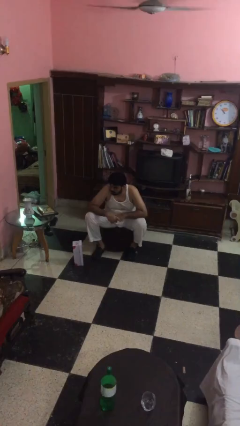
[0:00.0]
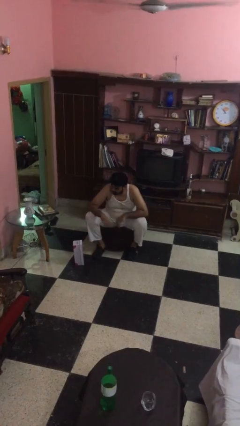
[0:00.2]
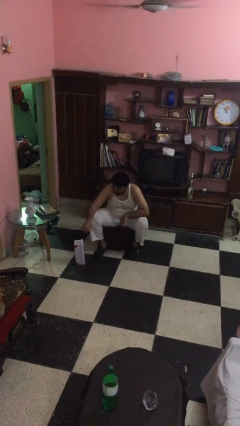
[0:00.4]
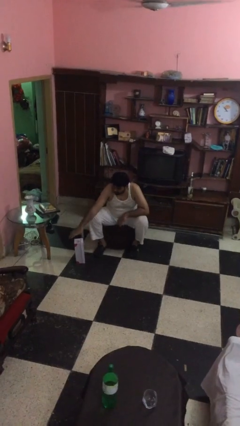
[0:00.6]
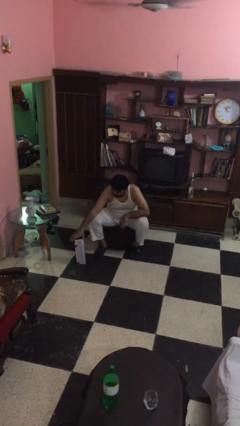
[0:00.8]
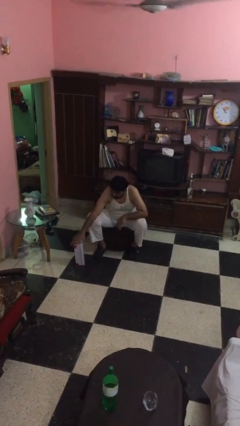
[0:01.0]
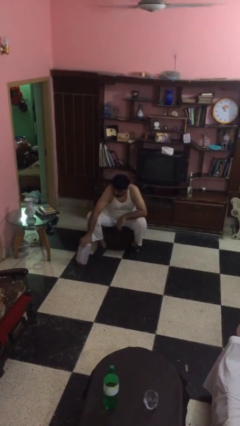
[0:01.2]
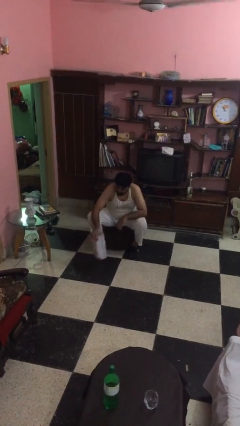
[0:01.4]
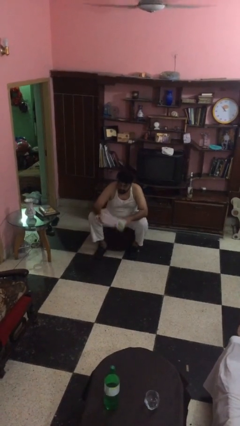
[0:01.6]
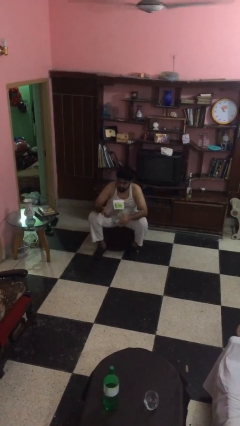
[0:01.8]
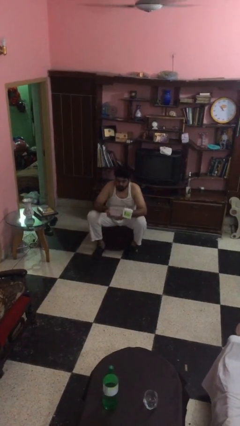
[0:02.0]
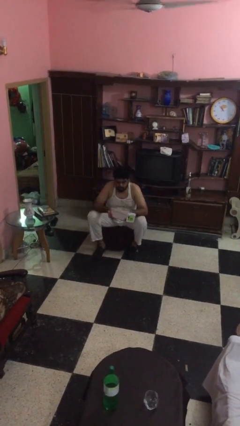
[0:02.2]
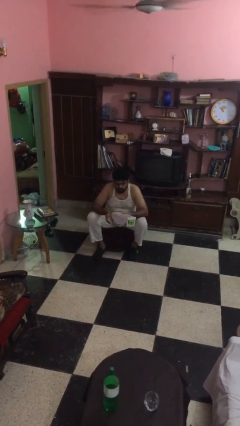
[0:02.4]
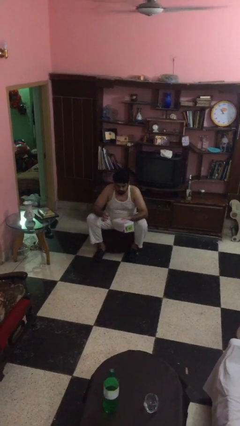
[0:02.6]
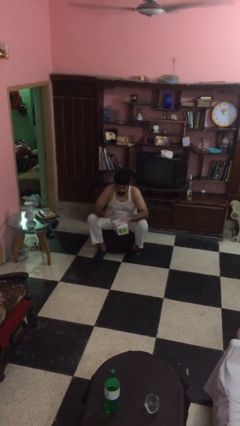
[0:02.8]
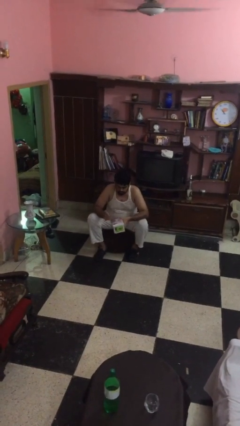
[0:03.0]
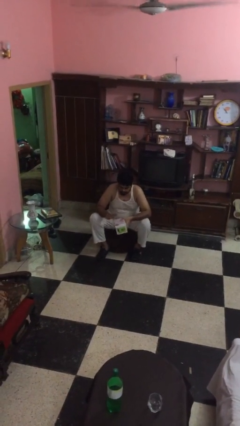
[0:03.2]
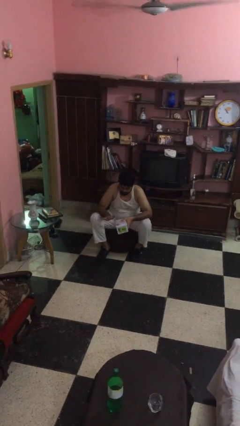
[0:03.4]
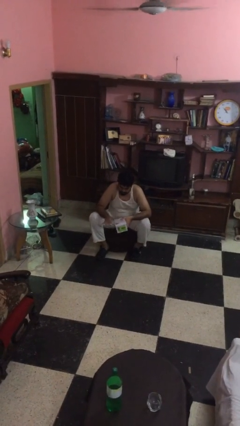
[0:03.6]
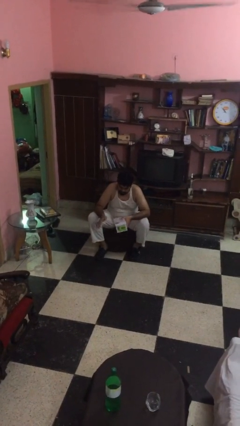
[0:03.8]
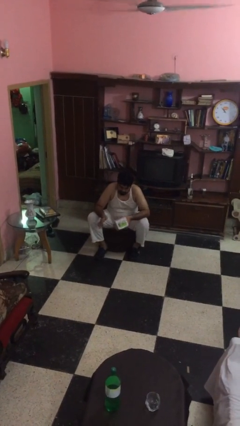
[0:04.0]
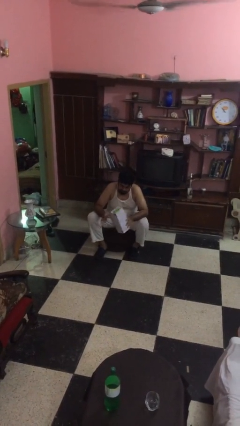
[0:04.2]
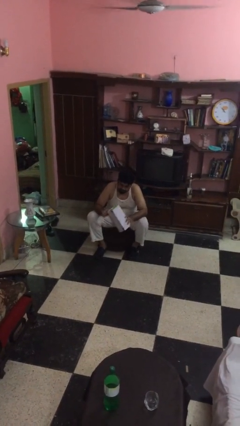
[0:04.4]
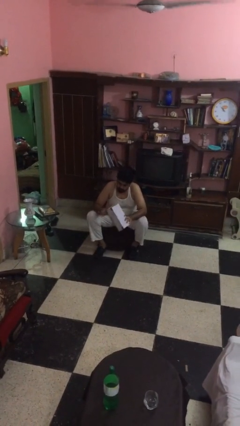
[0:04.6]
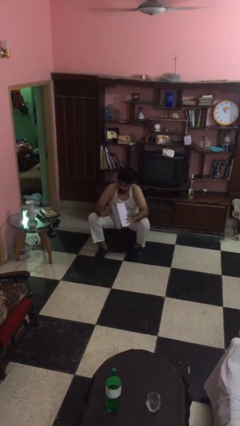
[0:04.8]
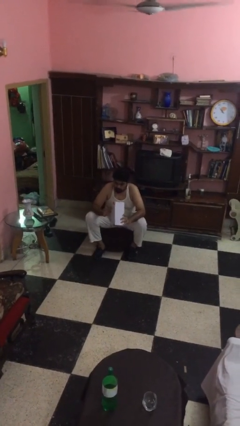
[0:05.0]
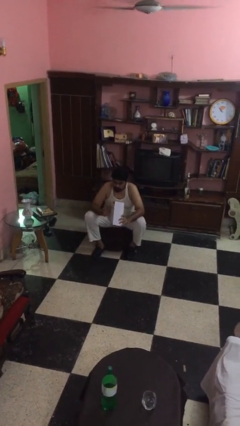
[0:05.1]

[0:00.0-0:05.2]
person picks up object from floor

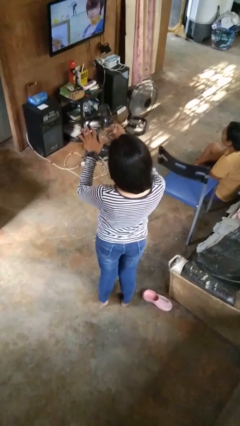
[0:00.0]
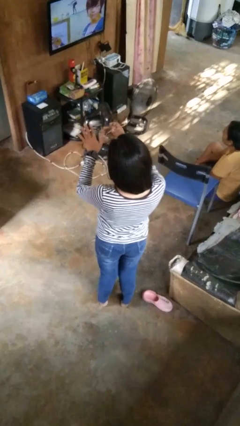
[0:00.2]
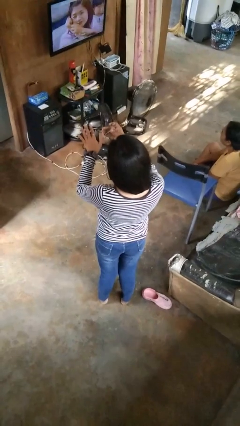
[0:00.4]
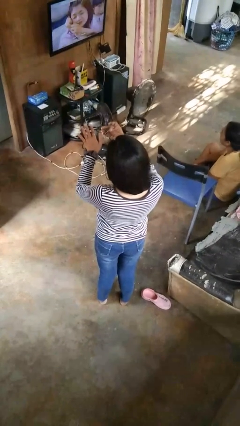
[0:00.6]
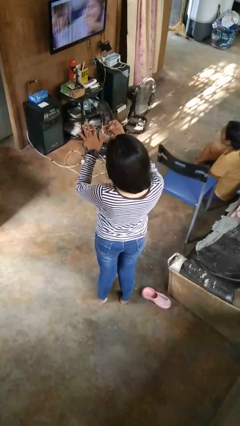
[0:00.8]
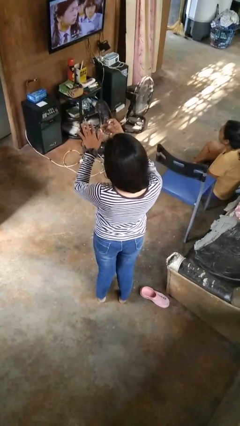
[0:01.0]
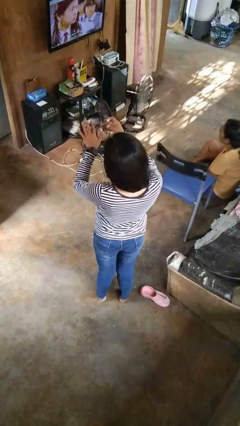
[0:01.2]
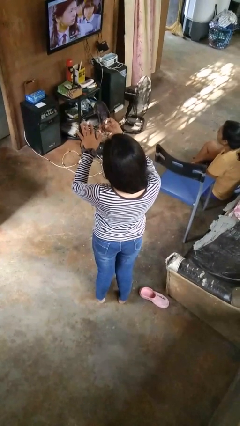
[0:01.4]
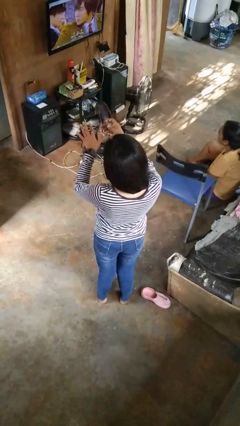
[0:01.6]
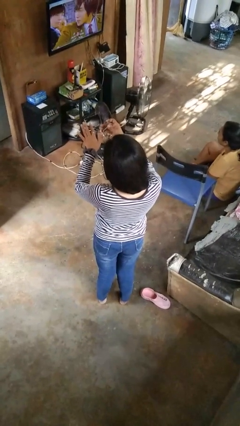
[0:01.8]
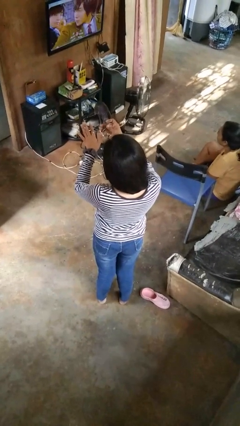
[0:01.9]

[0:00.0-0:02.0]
person clips fingernails

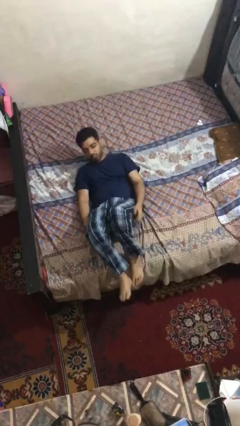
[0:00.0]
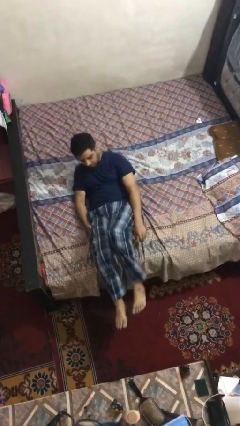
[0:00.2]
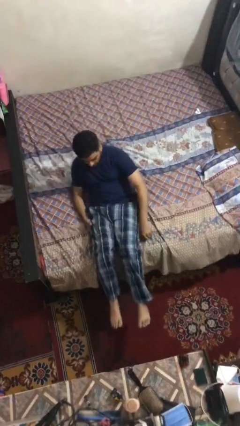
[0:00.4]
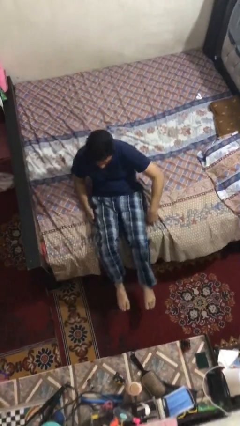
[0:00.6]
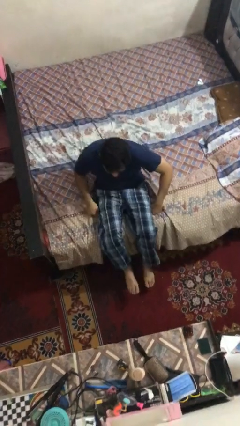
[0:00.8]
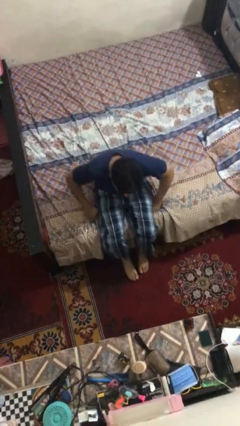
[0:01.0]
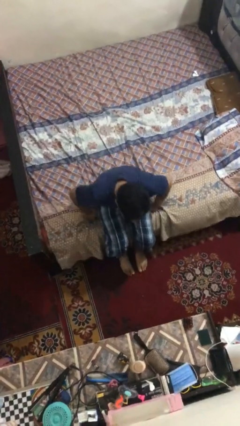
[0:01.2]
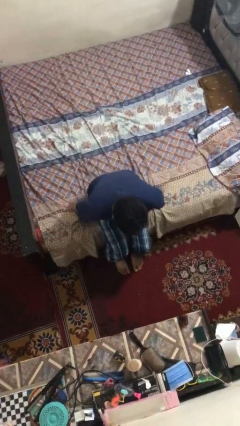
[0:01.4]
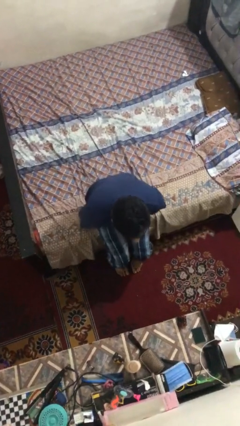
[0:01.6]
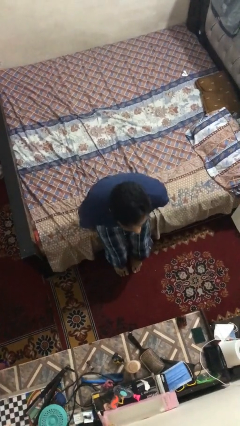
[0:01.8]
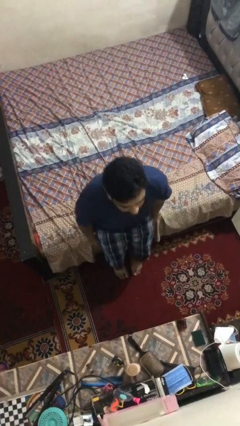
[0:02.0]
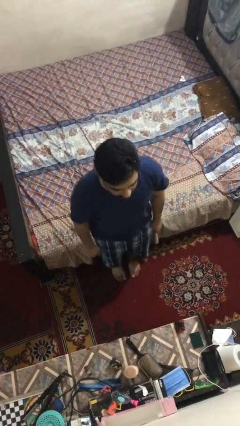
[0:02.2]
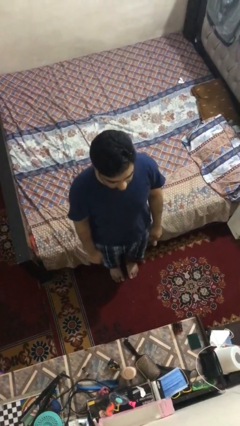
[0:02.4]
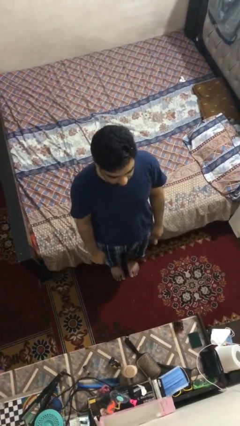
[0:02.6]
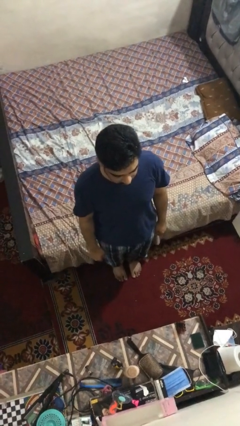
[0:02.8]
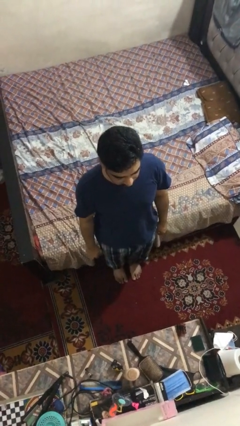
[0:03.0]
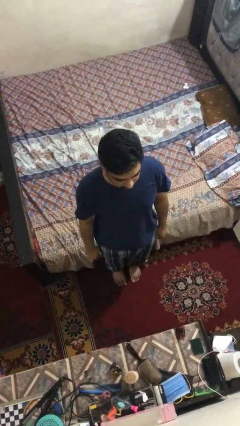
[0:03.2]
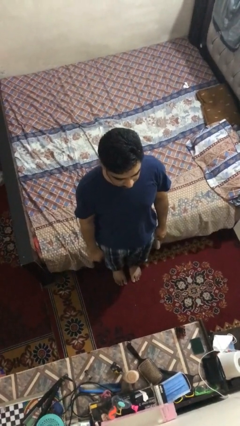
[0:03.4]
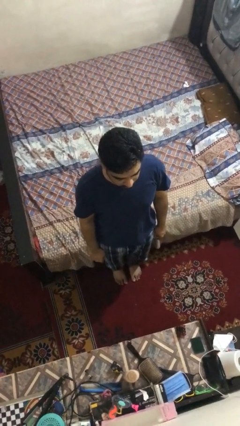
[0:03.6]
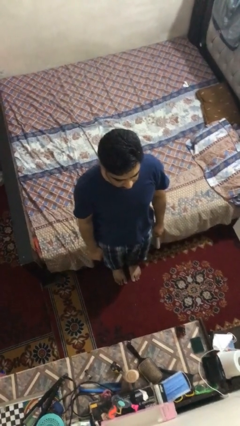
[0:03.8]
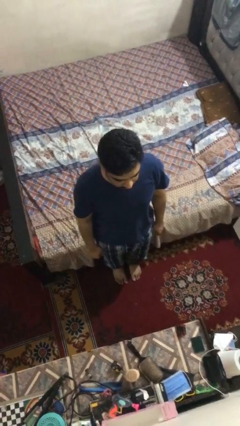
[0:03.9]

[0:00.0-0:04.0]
person stands up

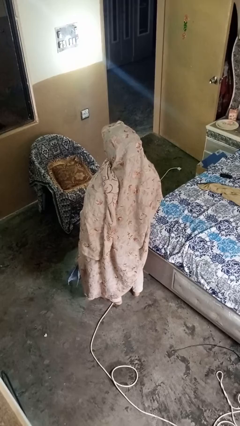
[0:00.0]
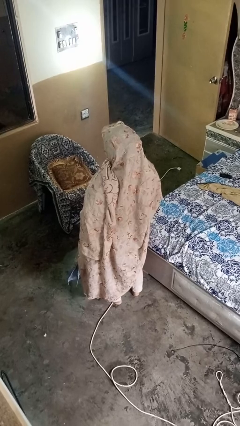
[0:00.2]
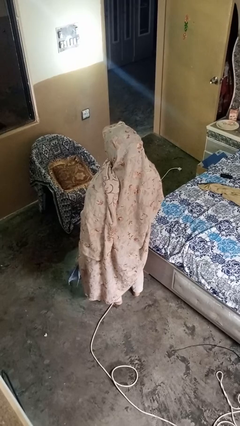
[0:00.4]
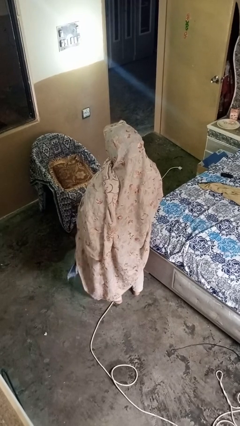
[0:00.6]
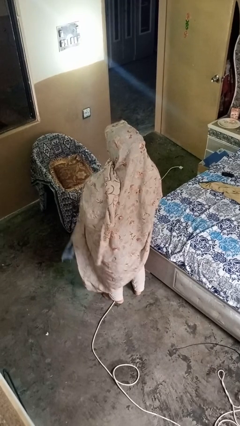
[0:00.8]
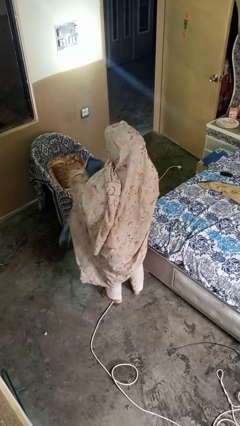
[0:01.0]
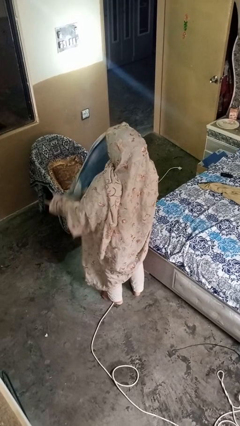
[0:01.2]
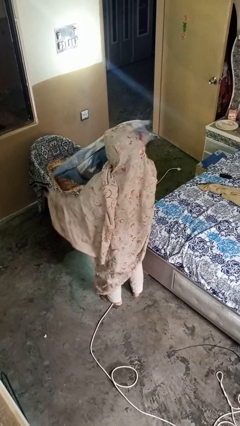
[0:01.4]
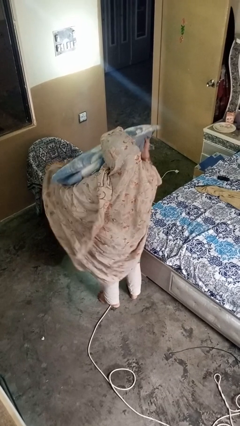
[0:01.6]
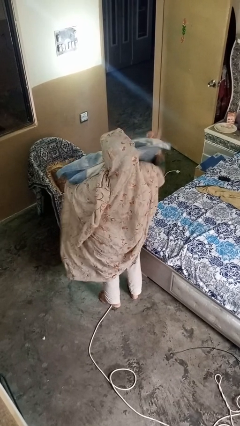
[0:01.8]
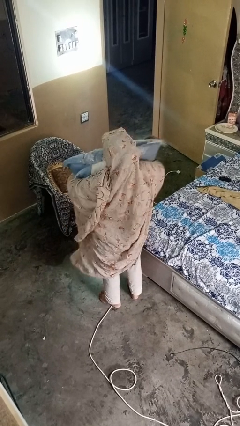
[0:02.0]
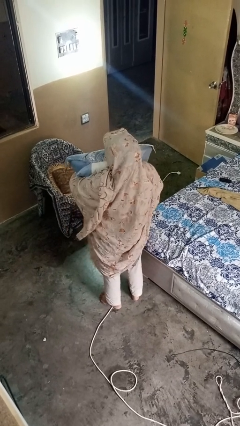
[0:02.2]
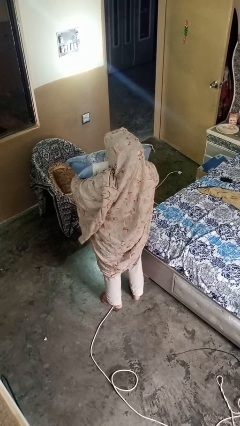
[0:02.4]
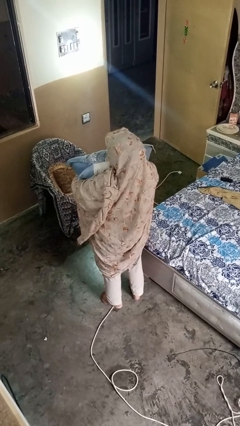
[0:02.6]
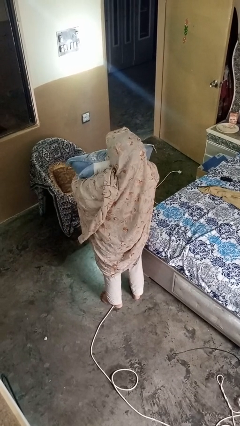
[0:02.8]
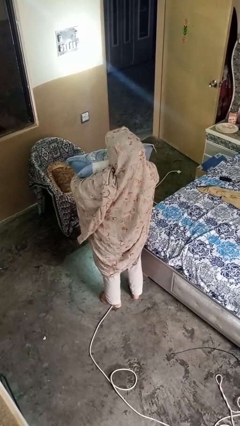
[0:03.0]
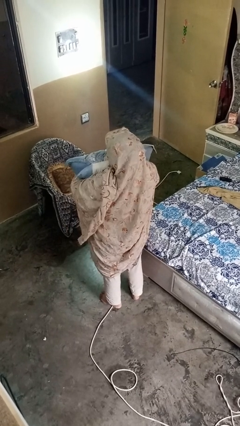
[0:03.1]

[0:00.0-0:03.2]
person squeezes object

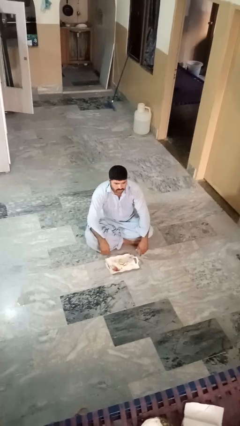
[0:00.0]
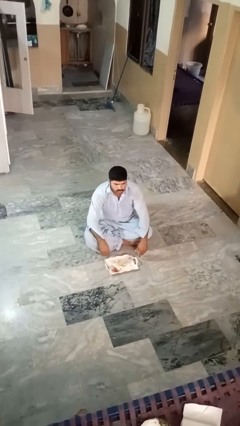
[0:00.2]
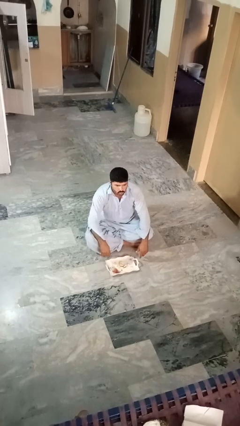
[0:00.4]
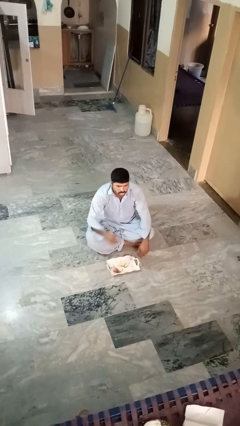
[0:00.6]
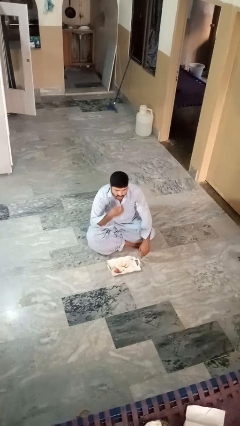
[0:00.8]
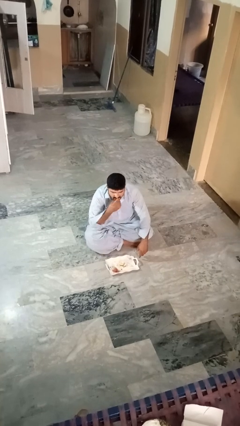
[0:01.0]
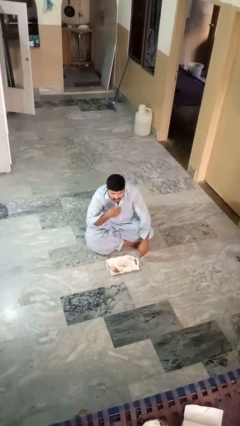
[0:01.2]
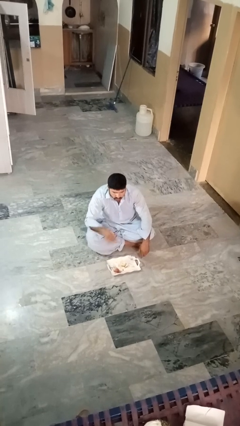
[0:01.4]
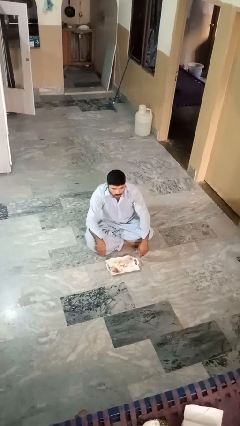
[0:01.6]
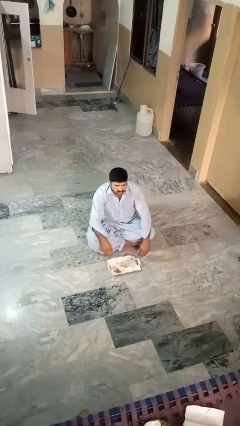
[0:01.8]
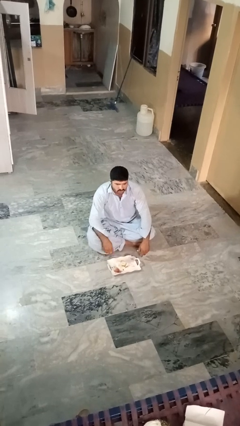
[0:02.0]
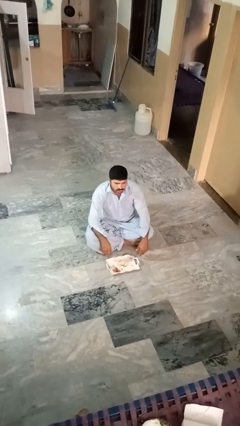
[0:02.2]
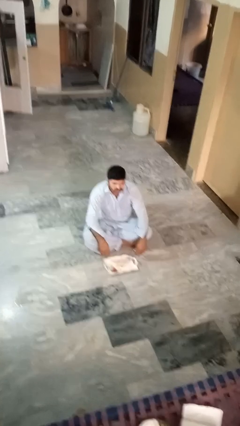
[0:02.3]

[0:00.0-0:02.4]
person eats apple

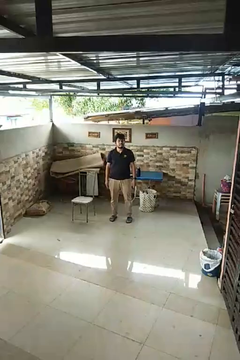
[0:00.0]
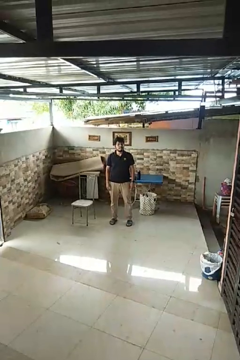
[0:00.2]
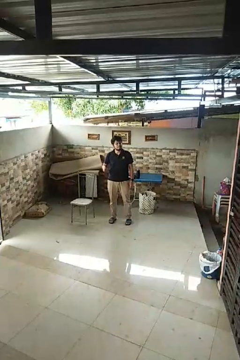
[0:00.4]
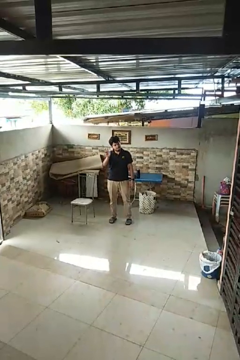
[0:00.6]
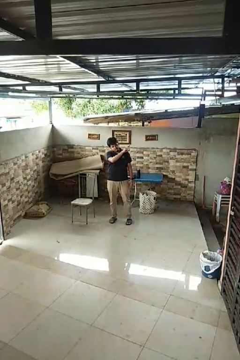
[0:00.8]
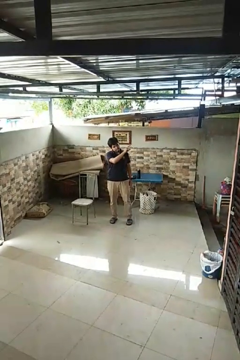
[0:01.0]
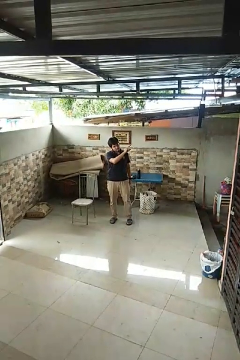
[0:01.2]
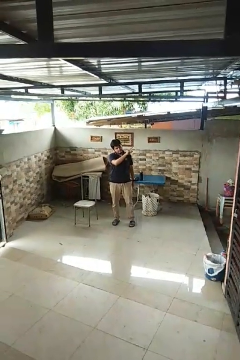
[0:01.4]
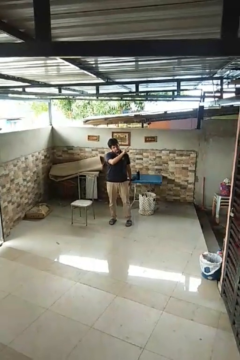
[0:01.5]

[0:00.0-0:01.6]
person gestures swipe left
